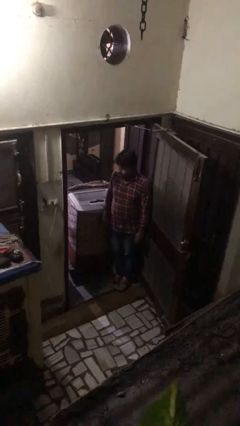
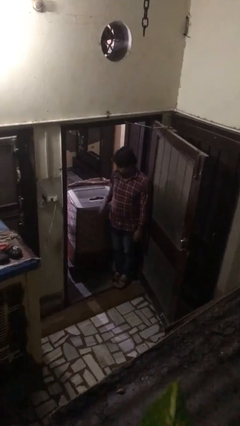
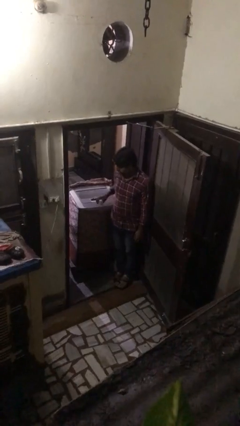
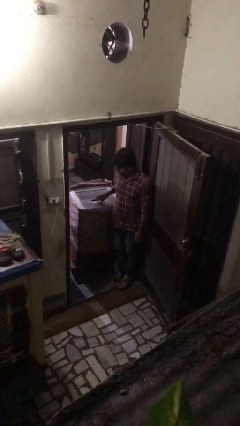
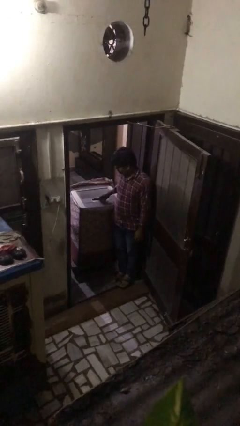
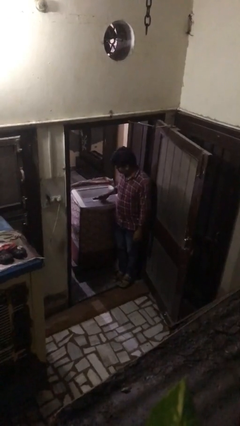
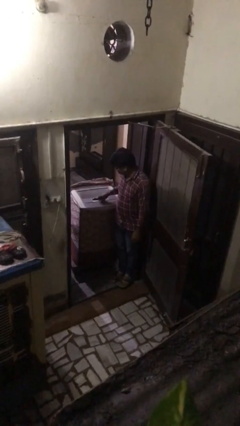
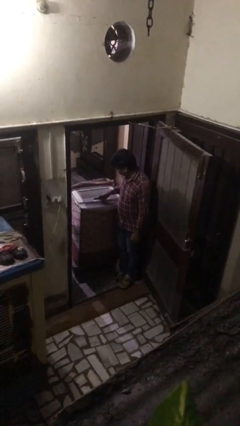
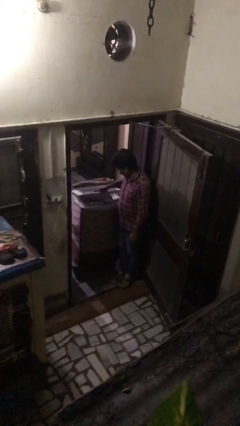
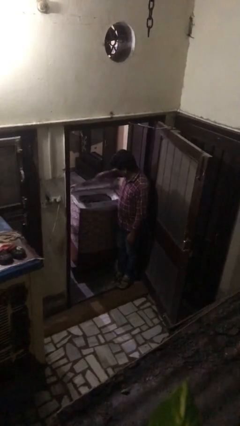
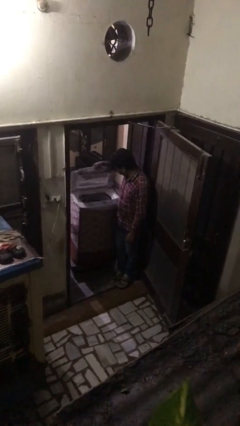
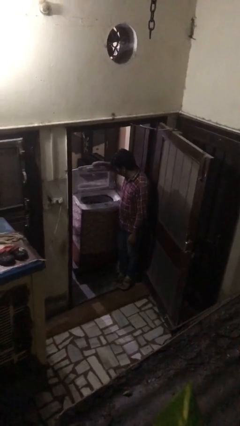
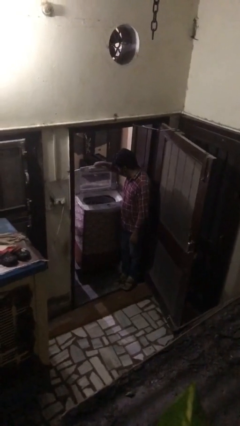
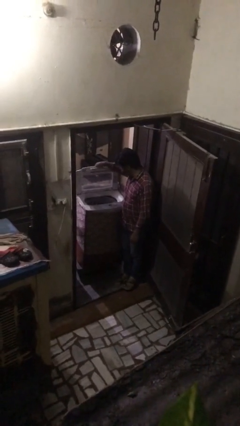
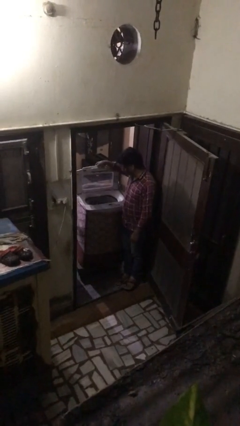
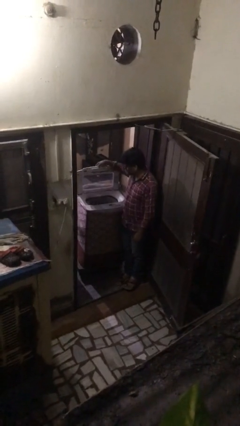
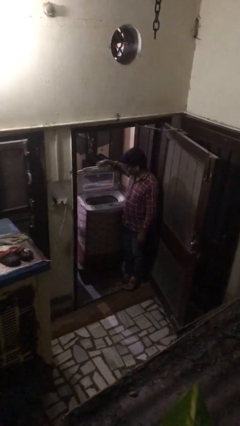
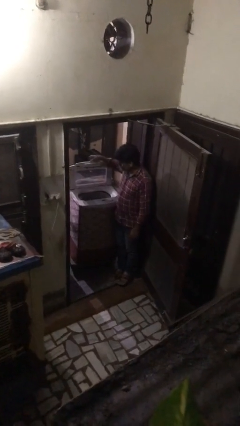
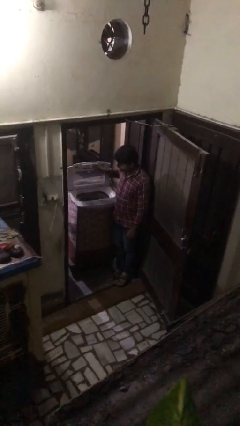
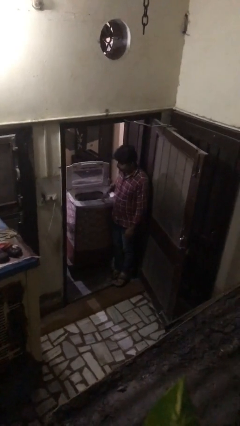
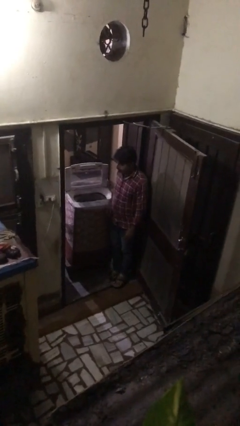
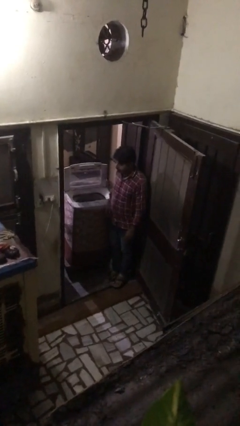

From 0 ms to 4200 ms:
person opens clothes washer

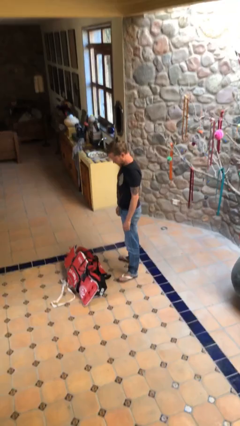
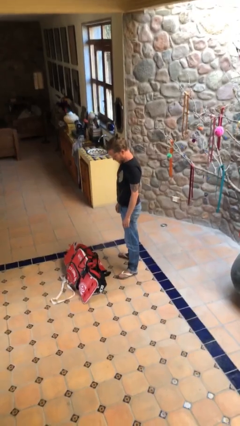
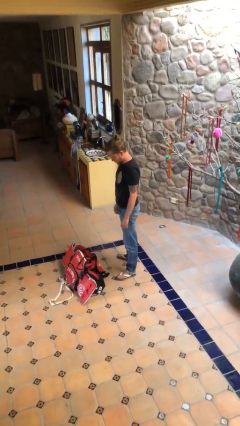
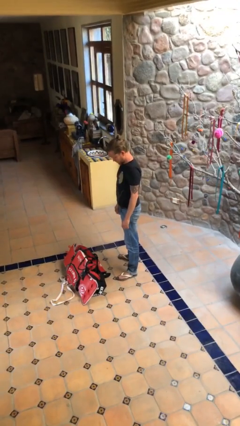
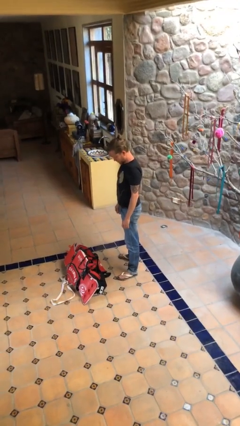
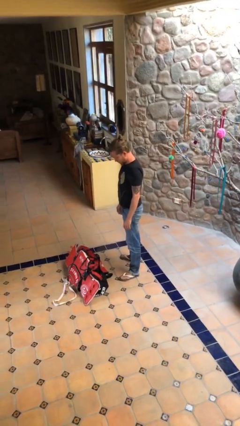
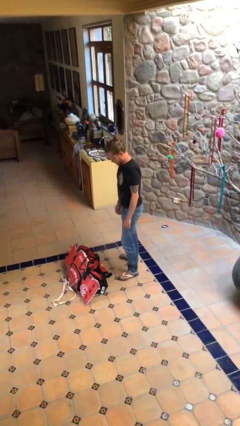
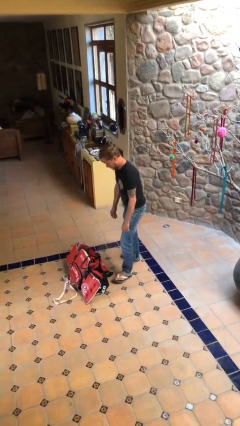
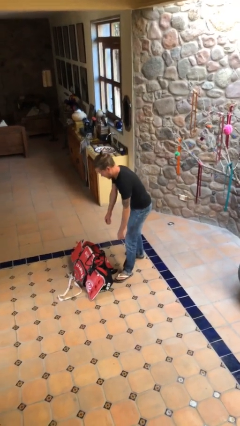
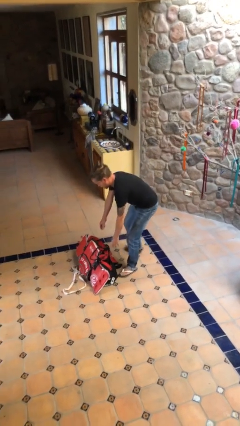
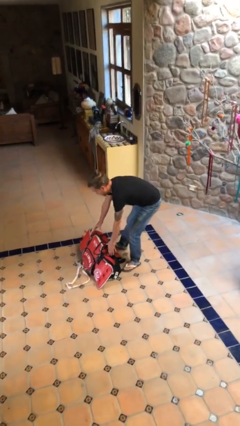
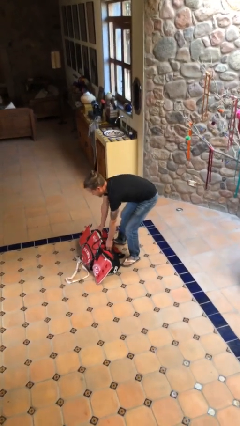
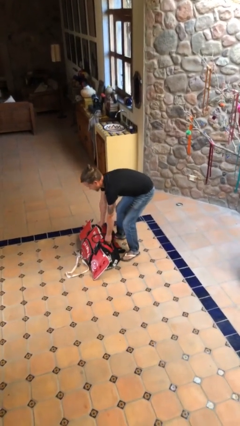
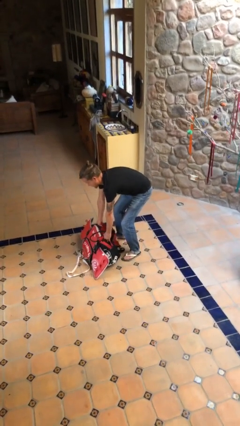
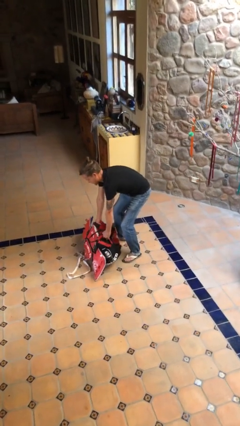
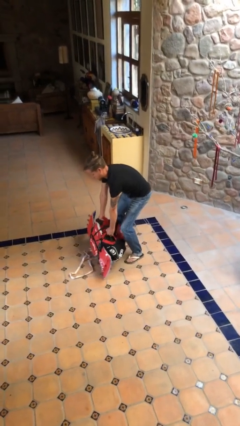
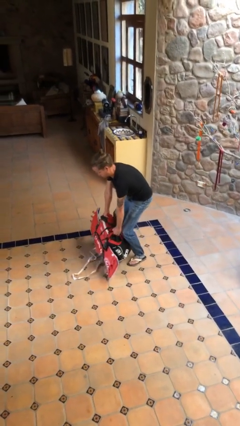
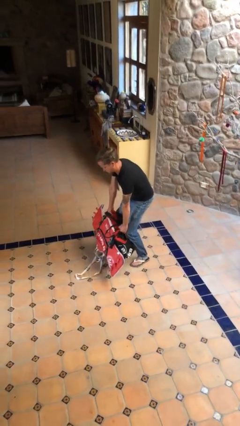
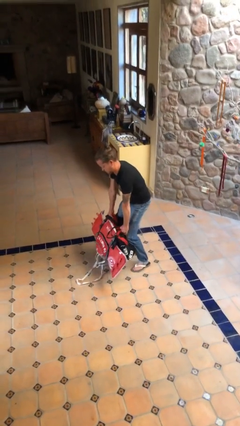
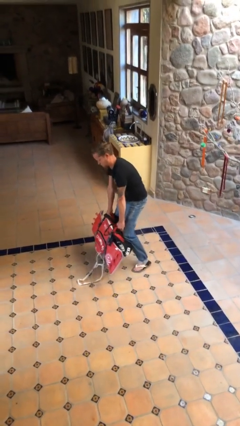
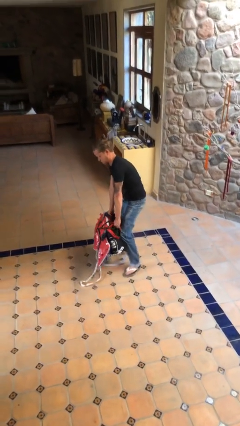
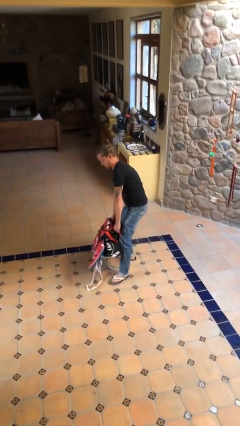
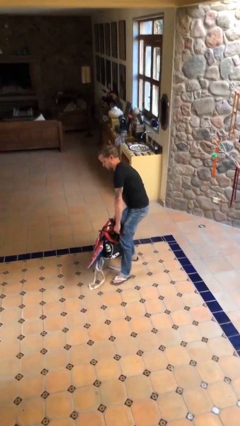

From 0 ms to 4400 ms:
person picks up object from floor

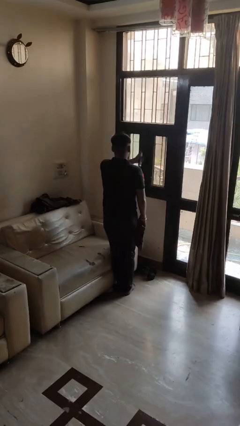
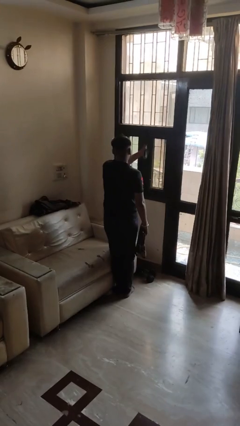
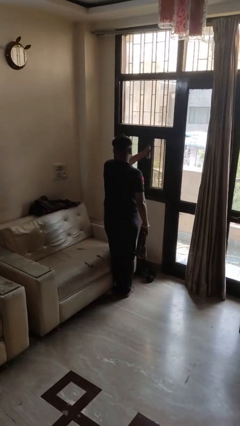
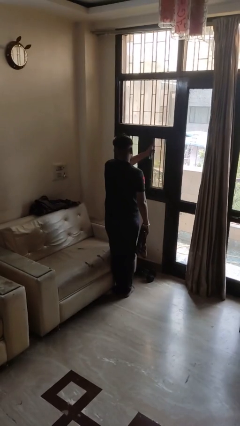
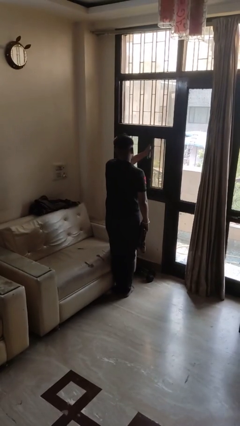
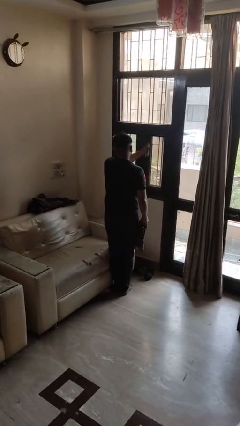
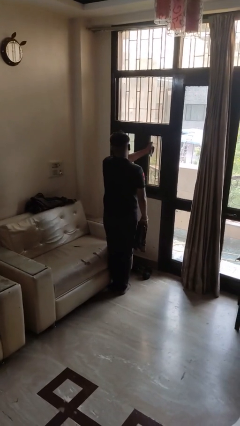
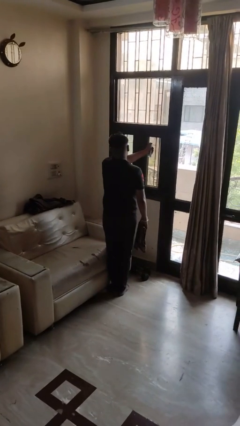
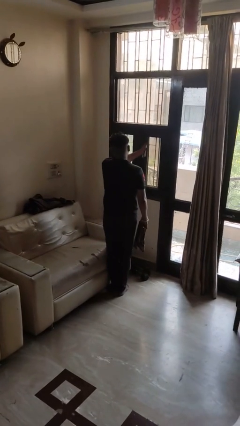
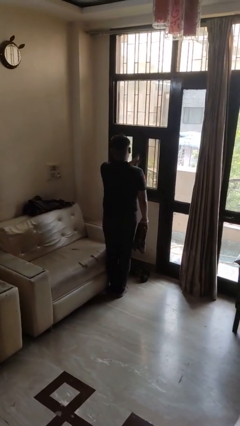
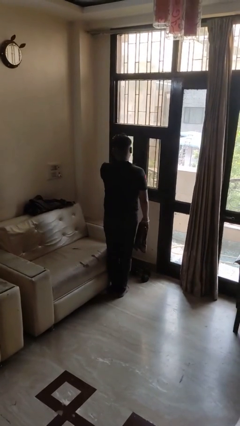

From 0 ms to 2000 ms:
person sprays from bottle

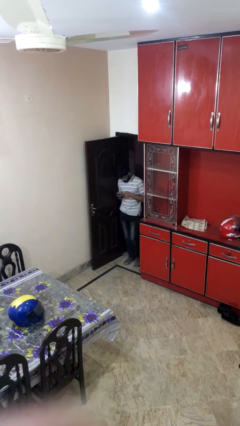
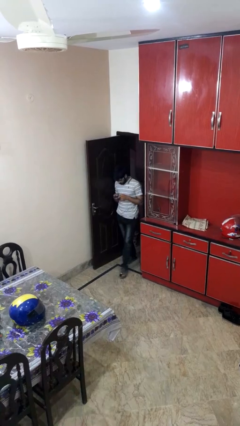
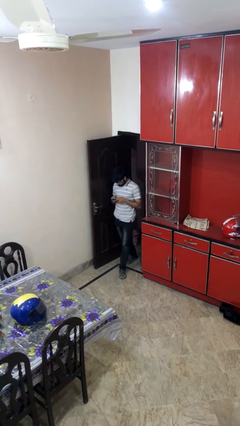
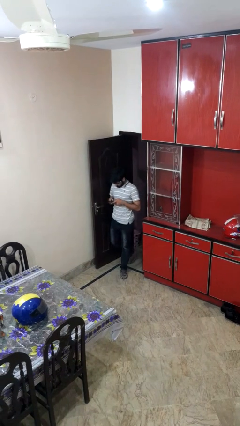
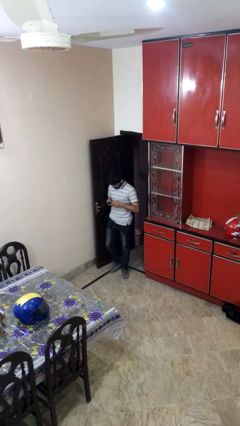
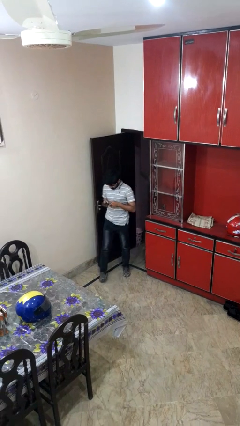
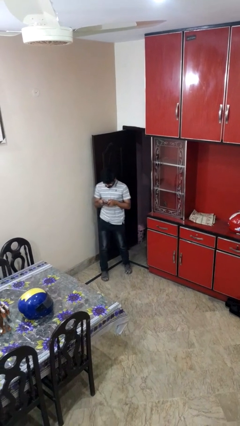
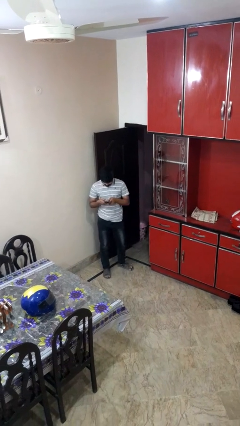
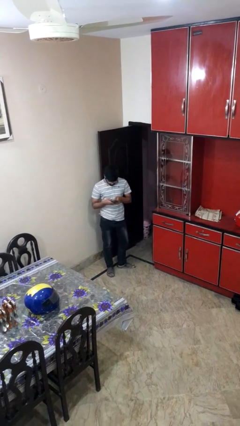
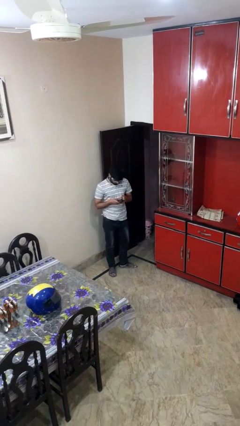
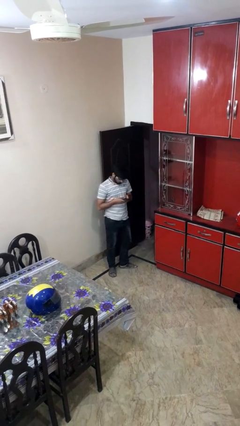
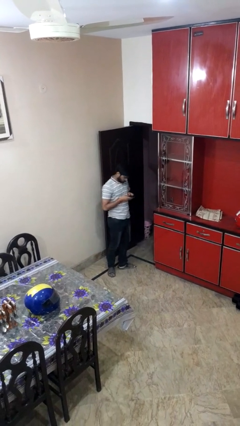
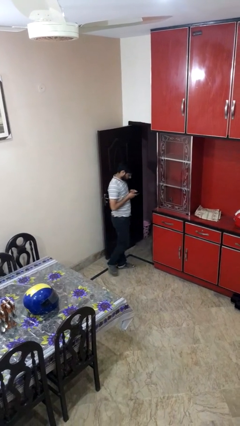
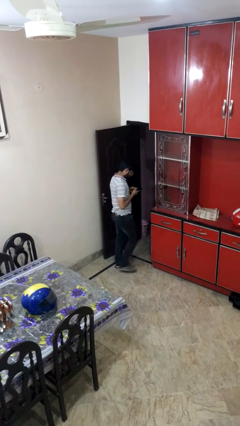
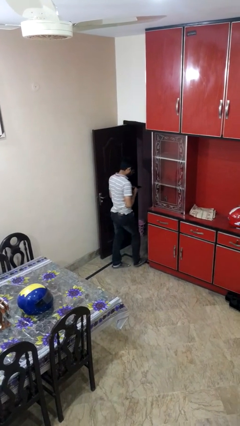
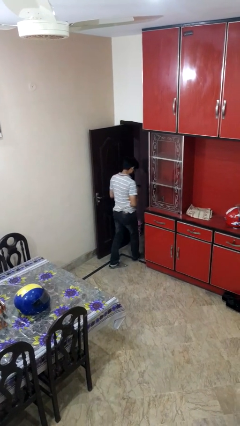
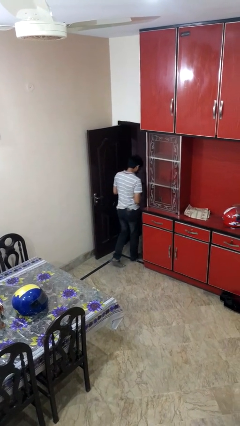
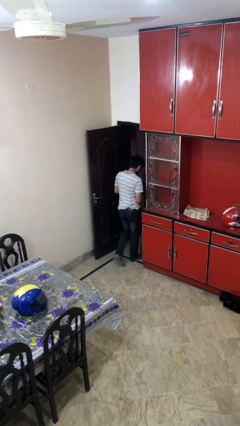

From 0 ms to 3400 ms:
person enters scene through structure

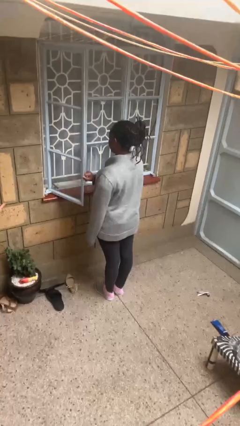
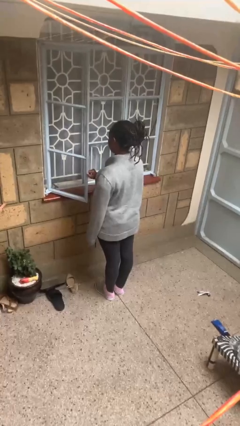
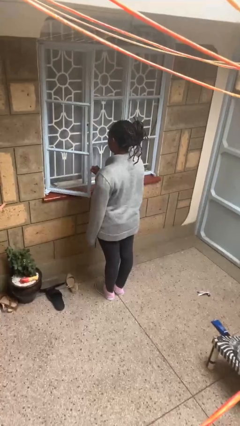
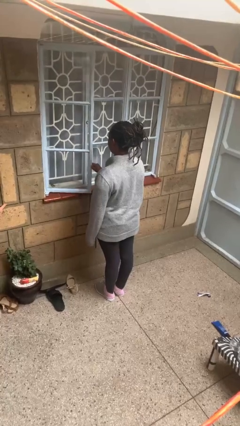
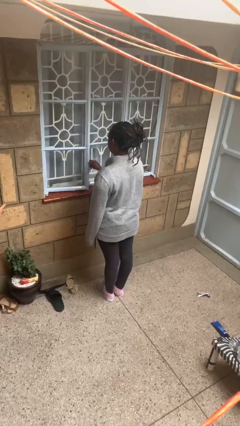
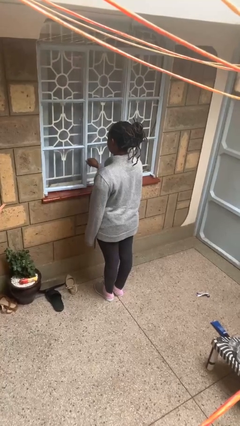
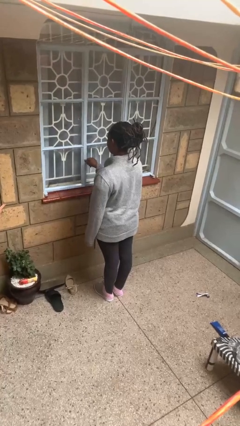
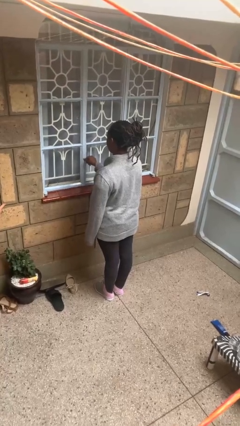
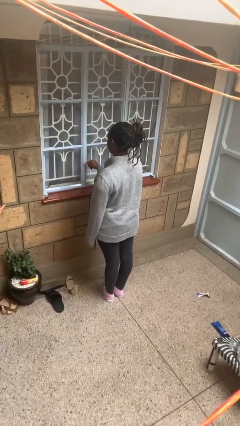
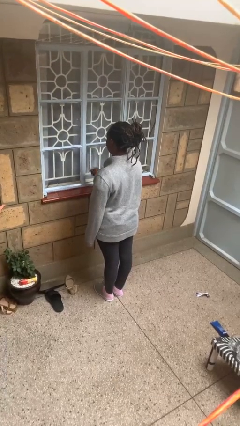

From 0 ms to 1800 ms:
person closes home window

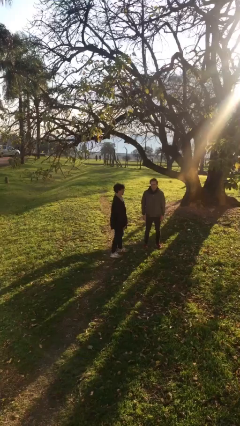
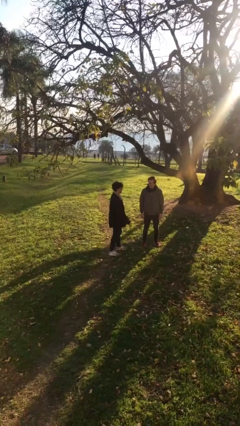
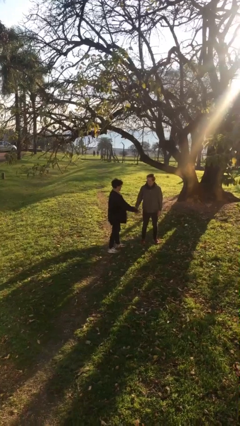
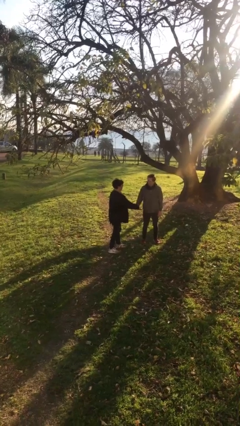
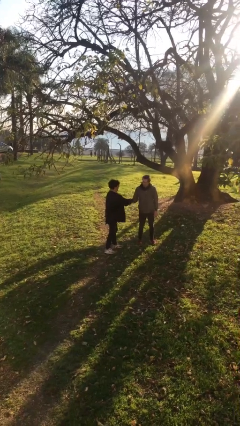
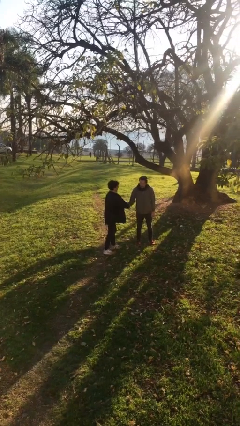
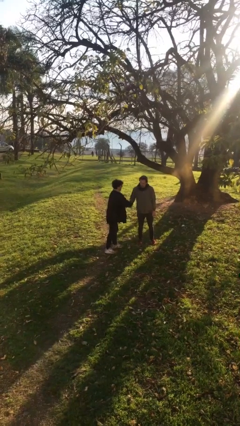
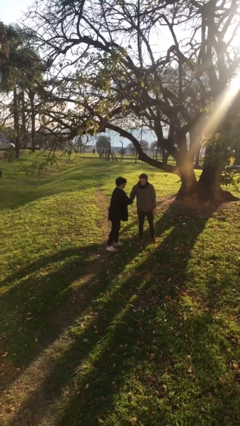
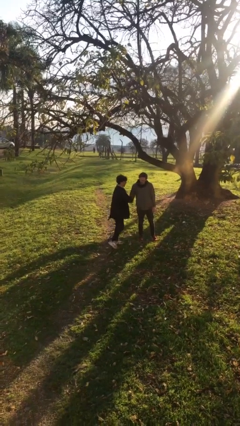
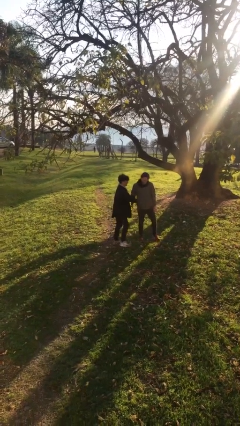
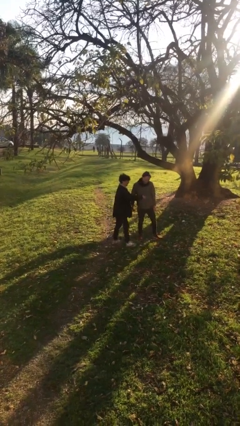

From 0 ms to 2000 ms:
person shakes hand

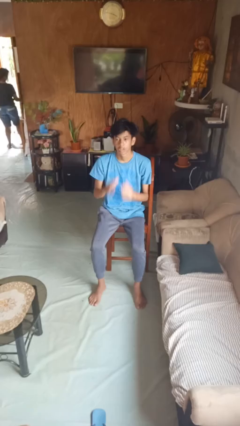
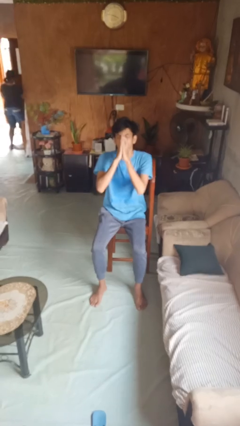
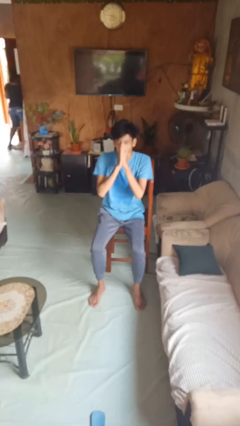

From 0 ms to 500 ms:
person sneezes into hand
